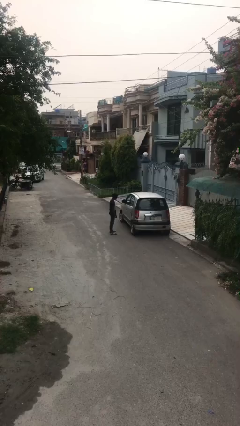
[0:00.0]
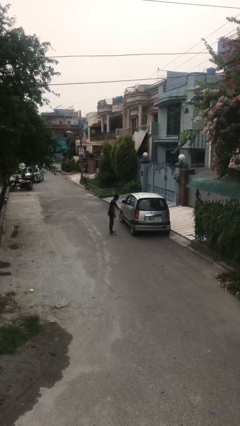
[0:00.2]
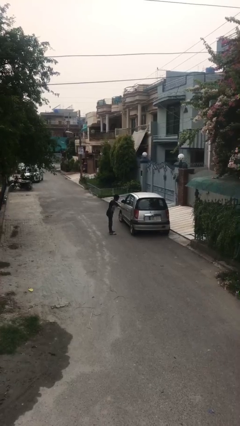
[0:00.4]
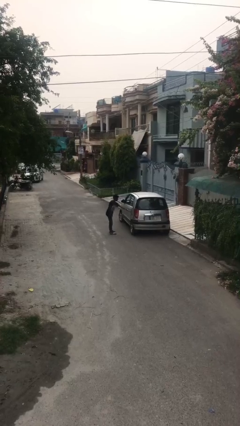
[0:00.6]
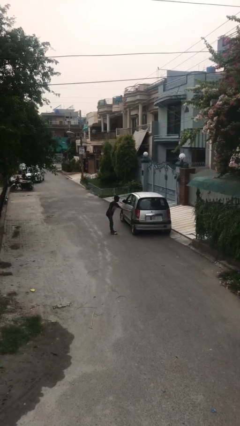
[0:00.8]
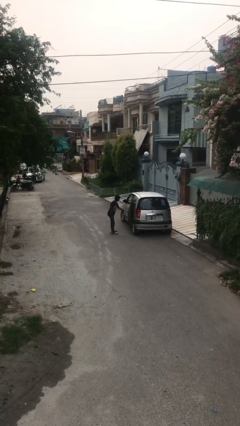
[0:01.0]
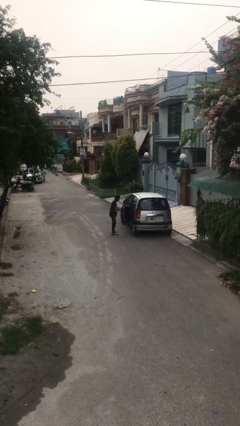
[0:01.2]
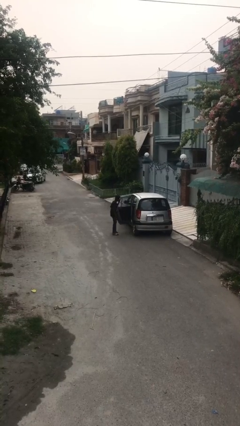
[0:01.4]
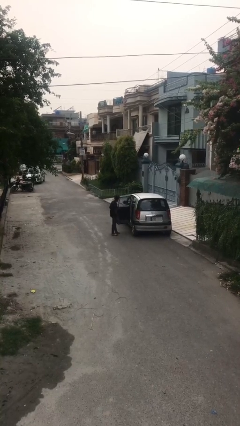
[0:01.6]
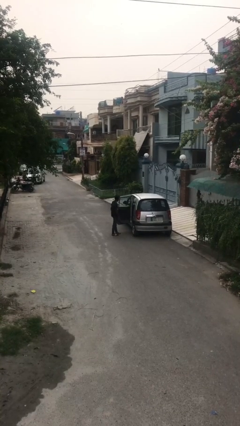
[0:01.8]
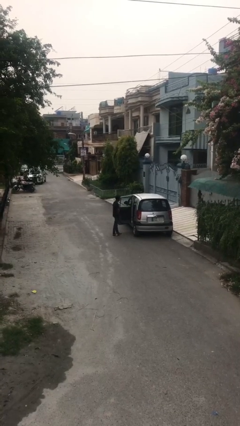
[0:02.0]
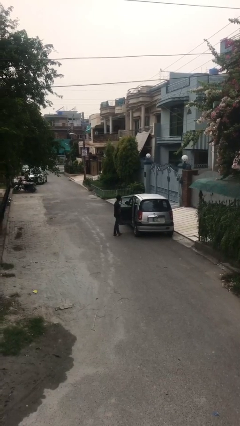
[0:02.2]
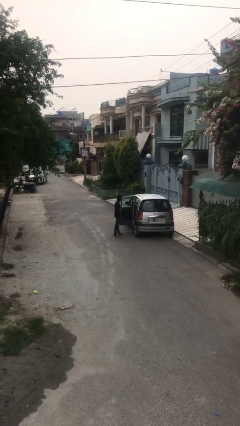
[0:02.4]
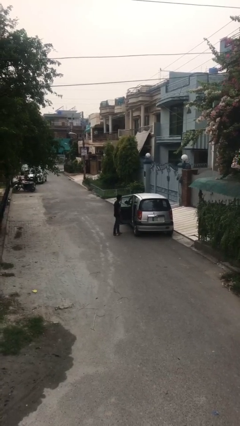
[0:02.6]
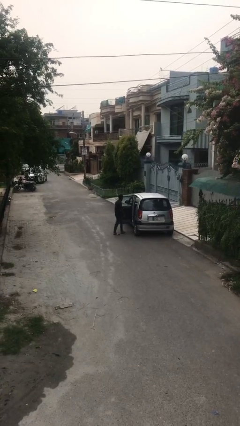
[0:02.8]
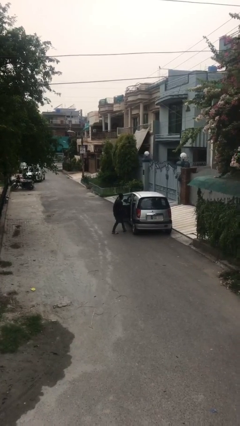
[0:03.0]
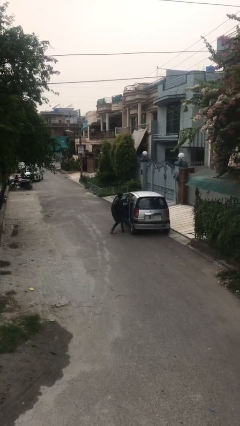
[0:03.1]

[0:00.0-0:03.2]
person opens car door

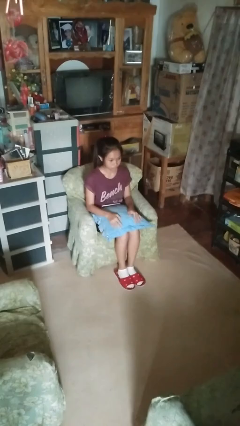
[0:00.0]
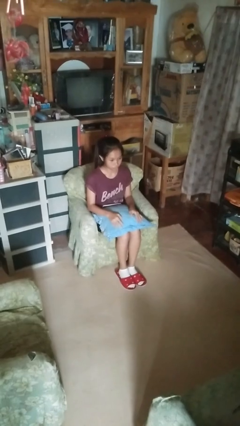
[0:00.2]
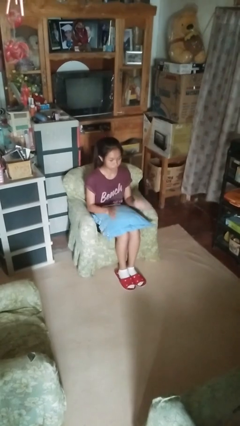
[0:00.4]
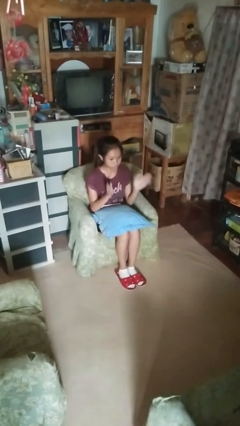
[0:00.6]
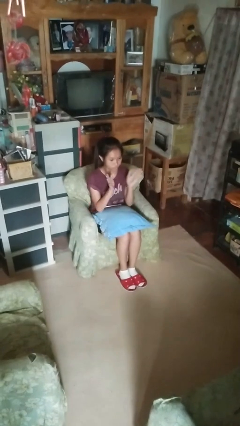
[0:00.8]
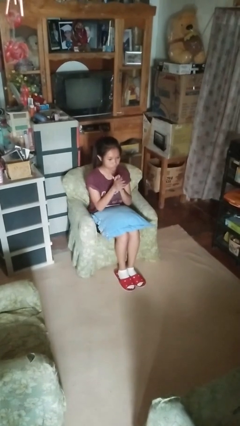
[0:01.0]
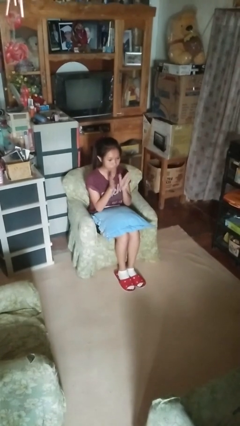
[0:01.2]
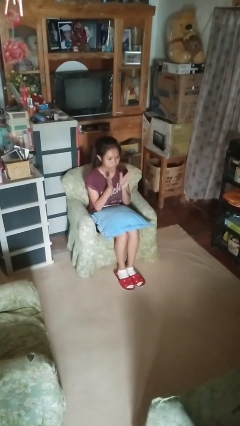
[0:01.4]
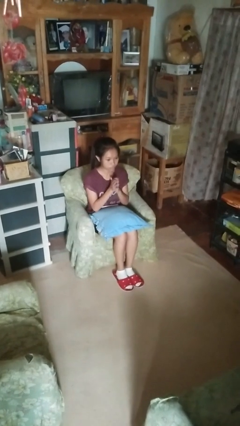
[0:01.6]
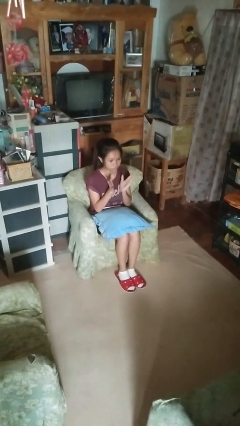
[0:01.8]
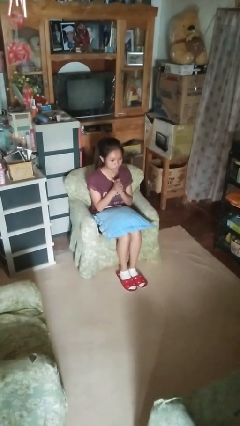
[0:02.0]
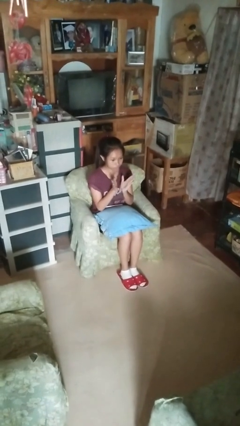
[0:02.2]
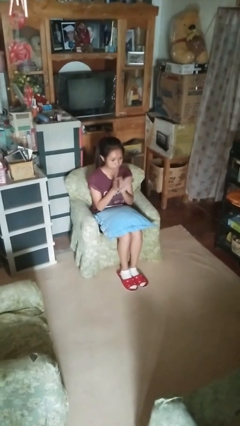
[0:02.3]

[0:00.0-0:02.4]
person claps hands

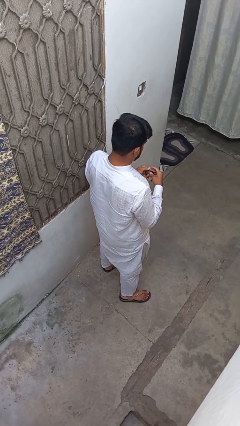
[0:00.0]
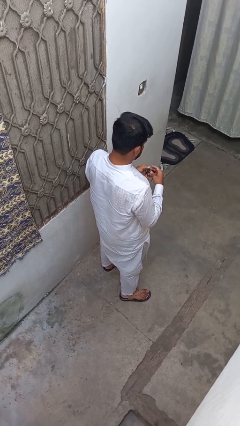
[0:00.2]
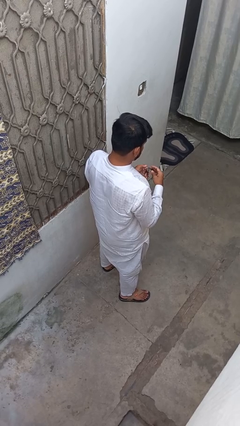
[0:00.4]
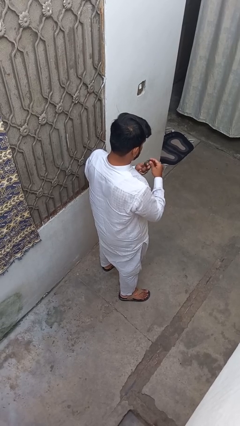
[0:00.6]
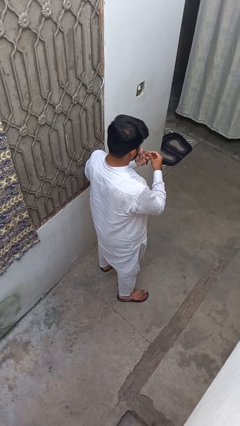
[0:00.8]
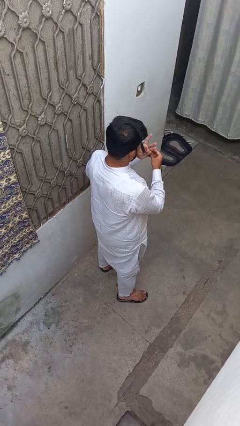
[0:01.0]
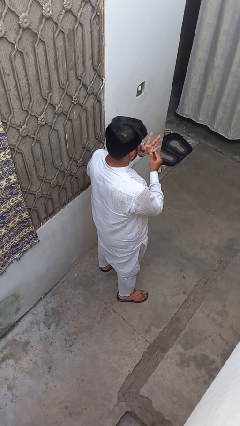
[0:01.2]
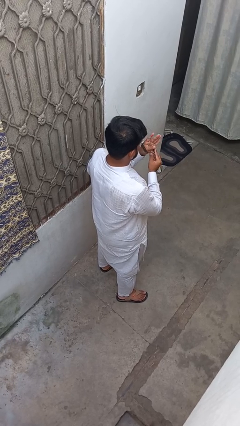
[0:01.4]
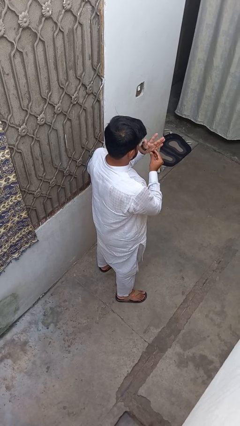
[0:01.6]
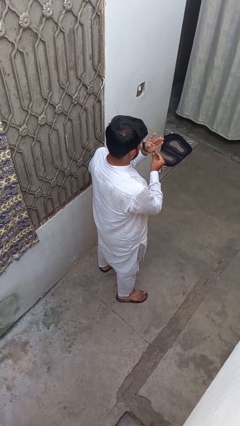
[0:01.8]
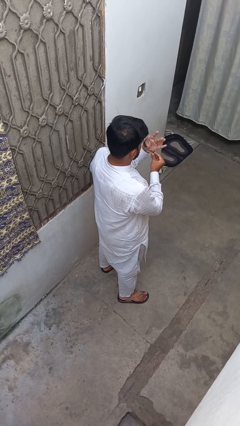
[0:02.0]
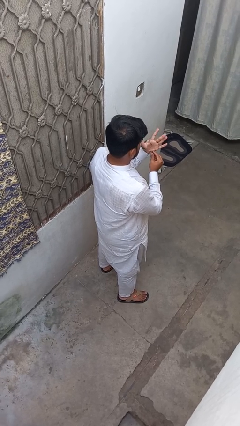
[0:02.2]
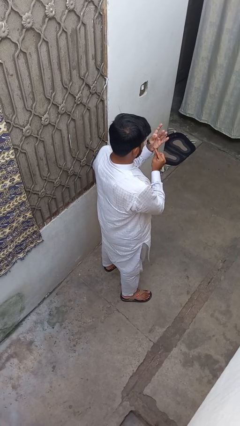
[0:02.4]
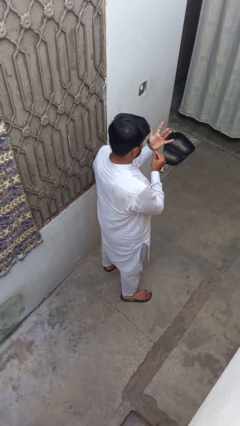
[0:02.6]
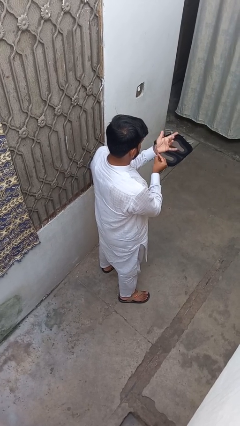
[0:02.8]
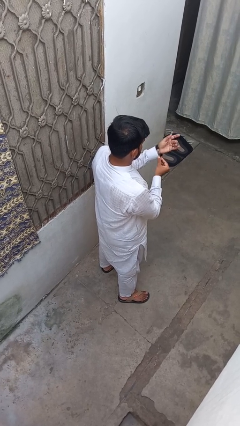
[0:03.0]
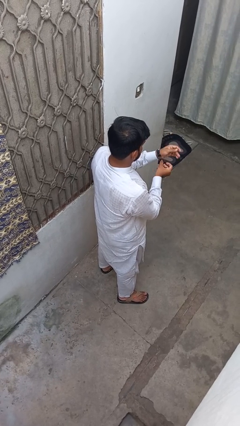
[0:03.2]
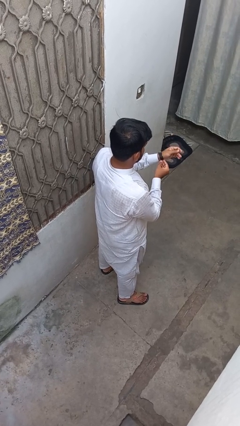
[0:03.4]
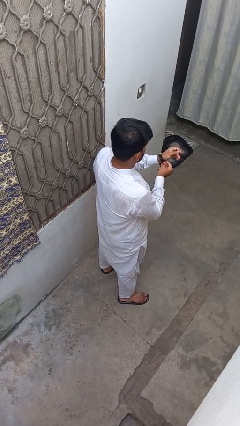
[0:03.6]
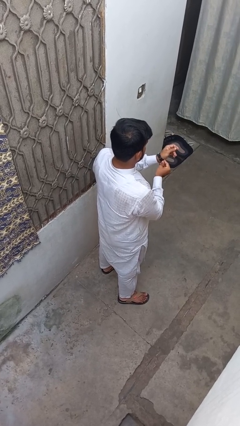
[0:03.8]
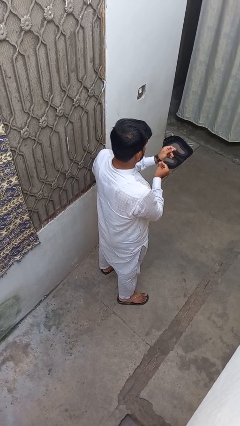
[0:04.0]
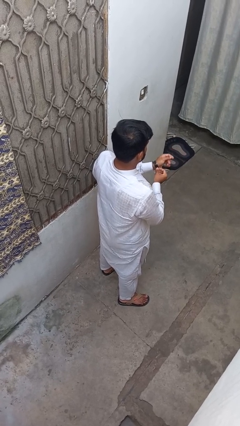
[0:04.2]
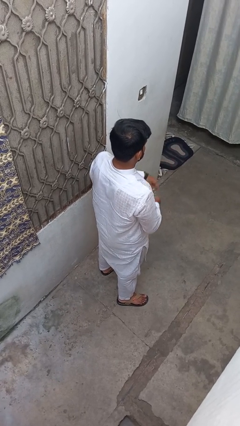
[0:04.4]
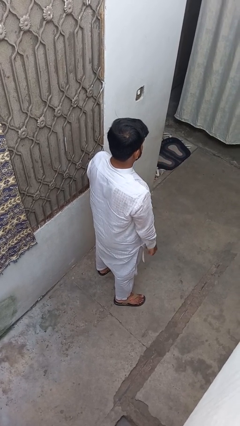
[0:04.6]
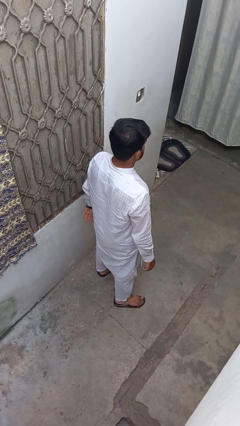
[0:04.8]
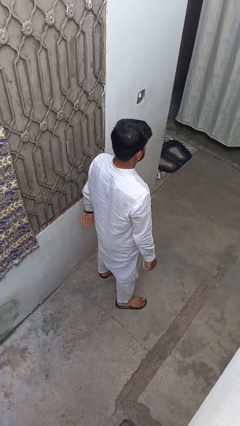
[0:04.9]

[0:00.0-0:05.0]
person puts on wristwatch

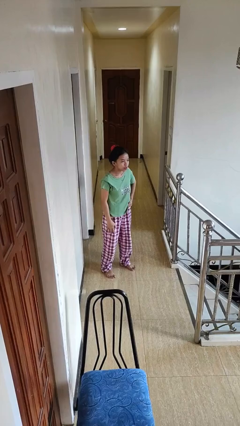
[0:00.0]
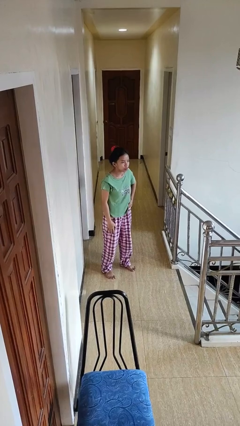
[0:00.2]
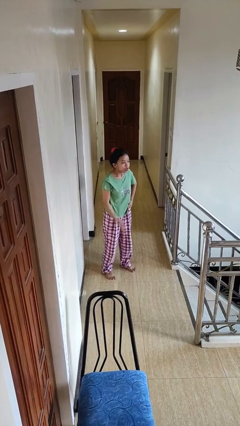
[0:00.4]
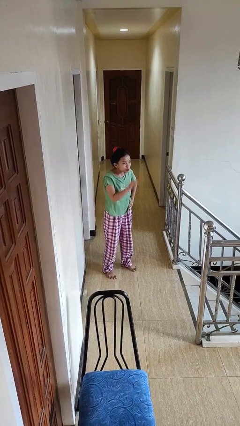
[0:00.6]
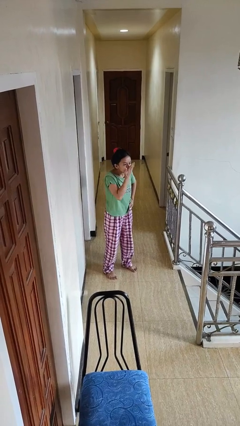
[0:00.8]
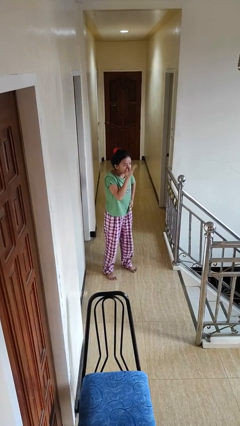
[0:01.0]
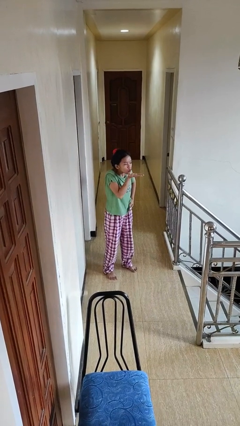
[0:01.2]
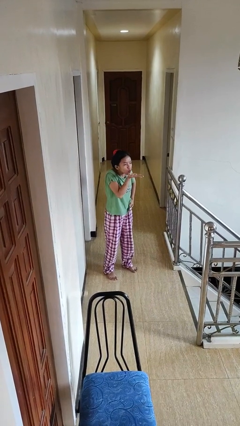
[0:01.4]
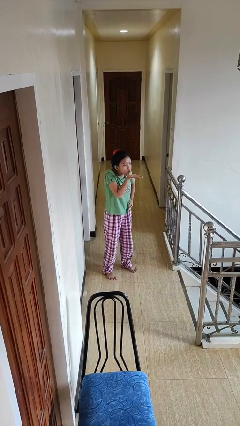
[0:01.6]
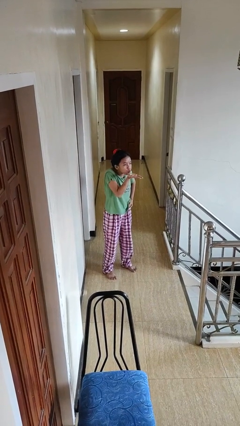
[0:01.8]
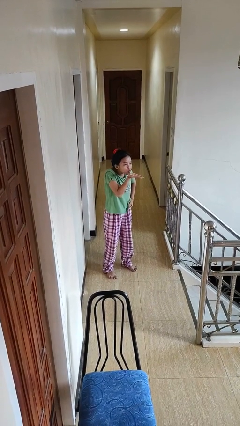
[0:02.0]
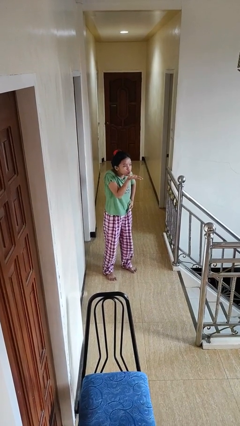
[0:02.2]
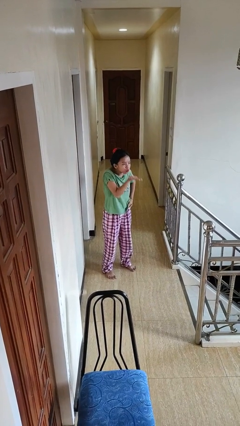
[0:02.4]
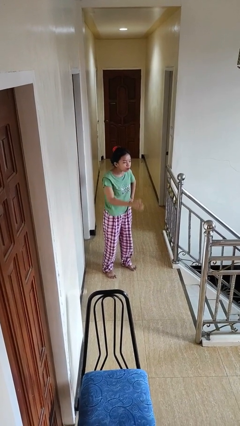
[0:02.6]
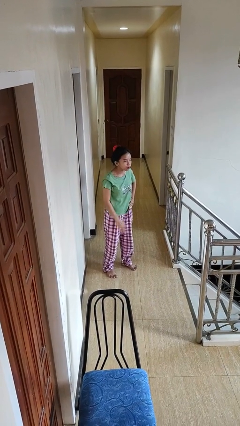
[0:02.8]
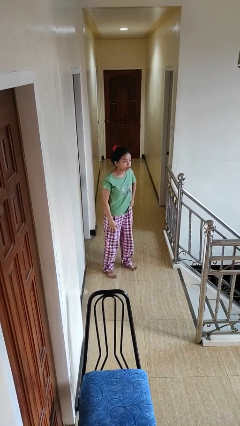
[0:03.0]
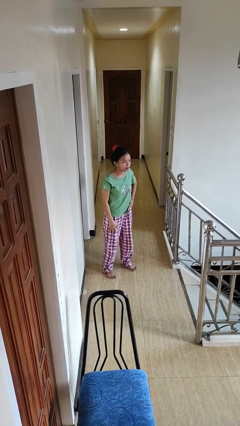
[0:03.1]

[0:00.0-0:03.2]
person gestures blow kiss

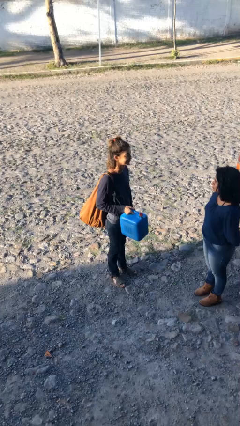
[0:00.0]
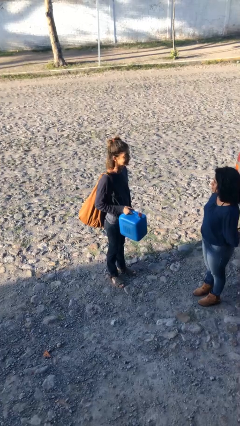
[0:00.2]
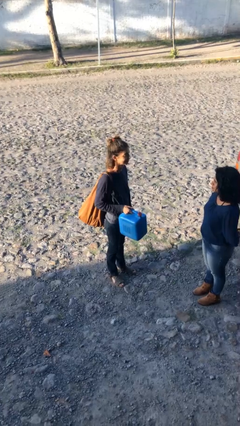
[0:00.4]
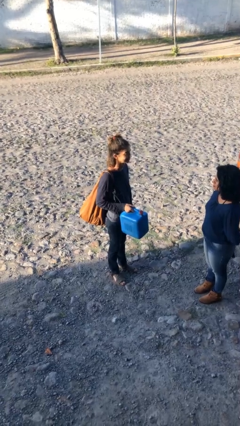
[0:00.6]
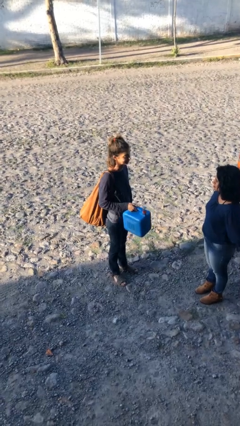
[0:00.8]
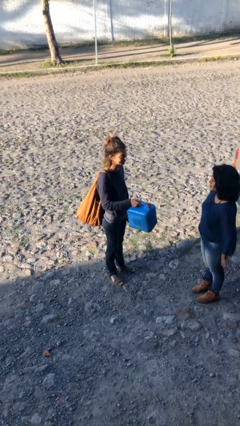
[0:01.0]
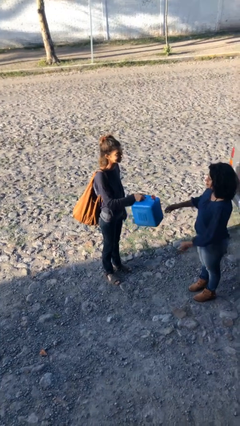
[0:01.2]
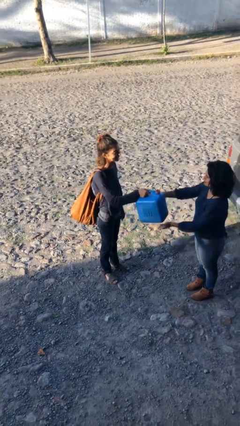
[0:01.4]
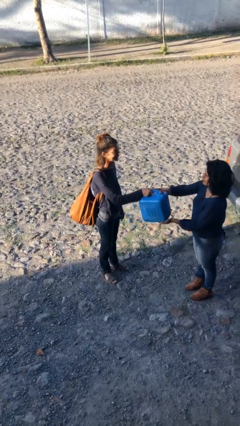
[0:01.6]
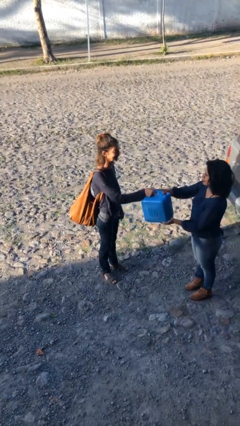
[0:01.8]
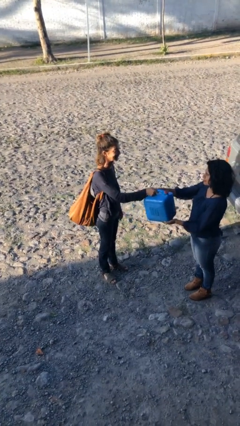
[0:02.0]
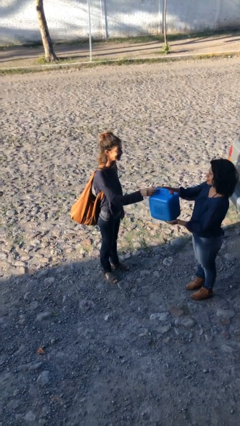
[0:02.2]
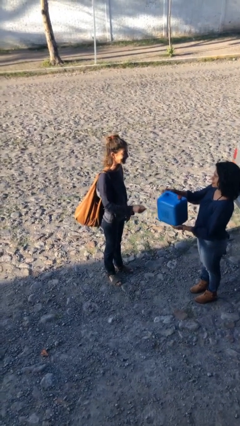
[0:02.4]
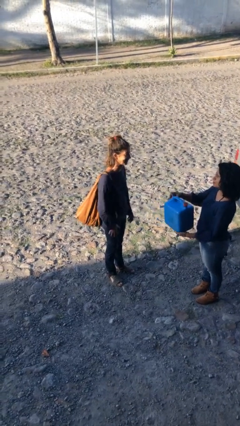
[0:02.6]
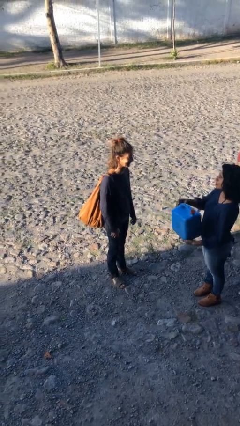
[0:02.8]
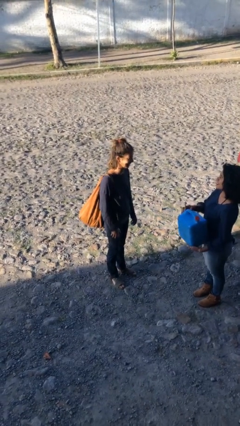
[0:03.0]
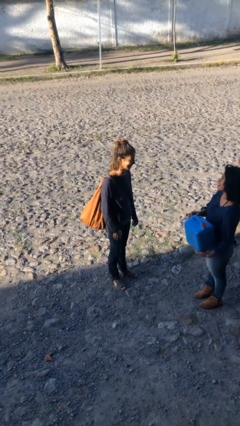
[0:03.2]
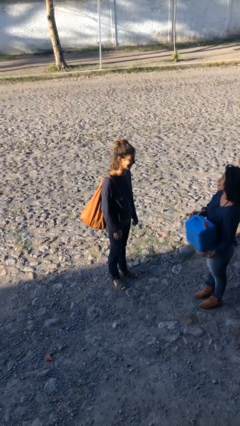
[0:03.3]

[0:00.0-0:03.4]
person transfers object to person
